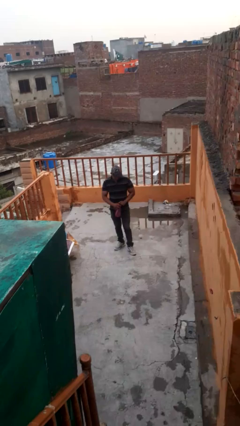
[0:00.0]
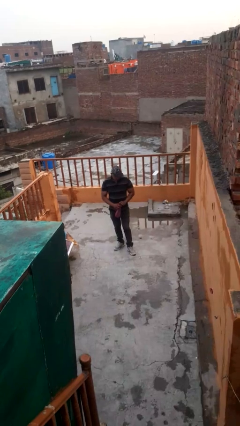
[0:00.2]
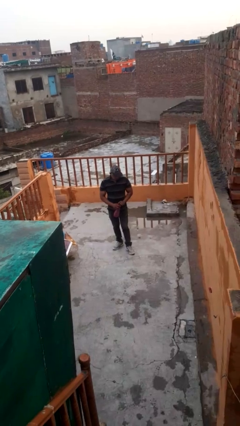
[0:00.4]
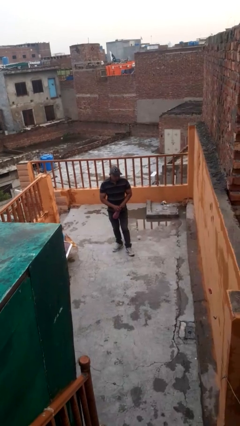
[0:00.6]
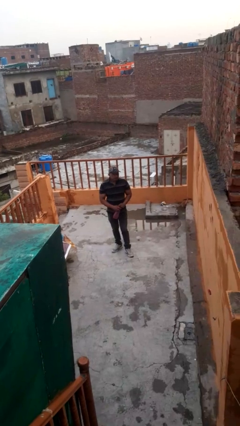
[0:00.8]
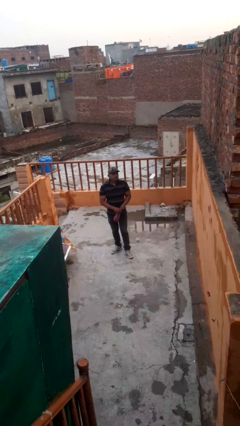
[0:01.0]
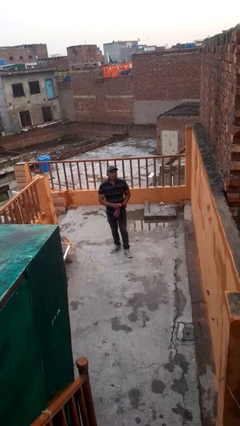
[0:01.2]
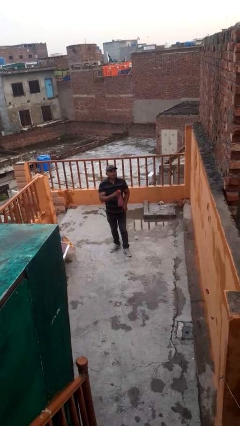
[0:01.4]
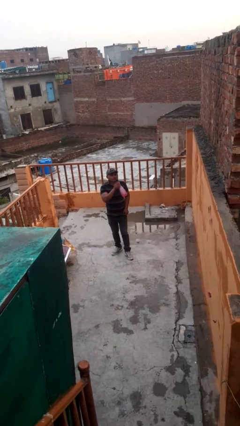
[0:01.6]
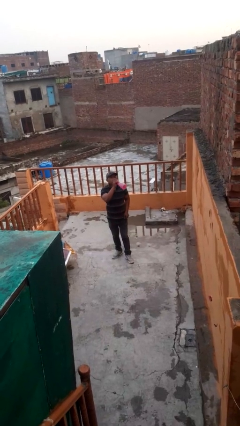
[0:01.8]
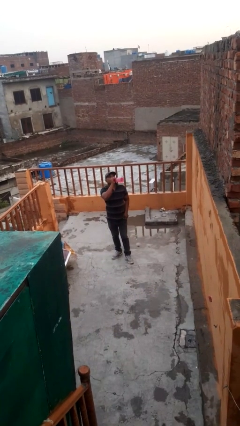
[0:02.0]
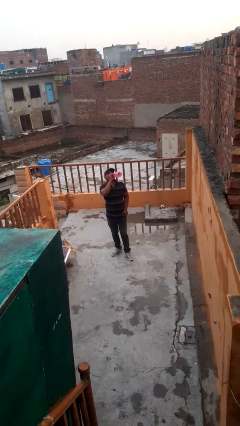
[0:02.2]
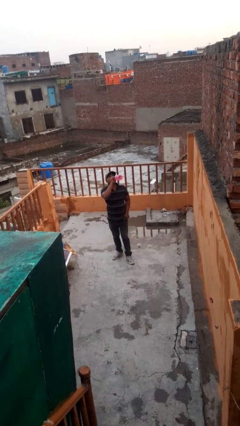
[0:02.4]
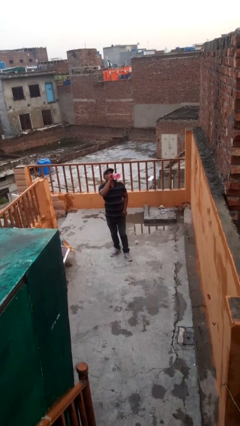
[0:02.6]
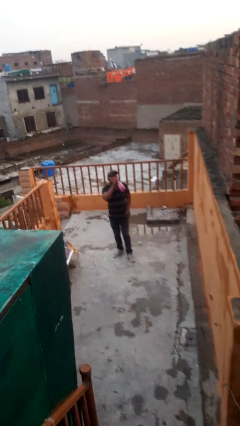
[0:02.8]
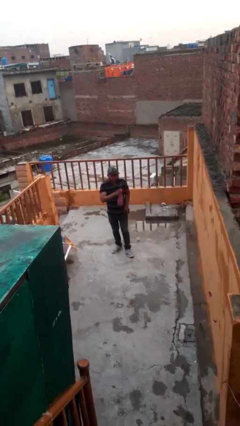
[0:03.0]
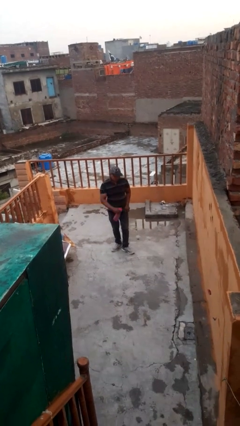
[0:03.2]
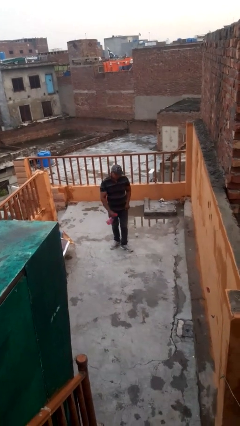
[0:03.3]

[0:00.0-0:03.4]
person drinks from bottle

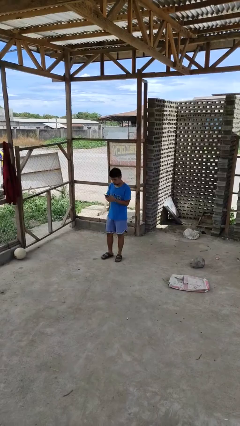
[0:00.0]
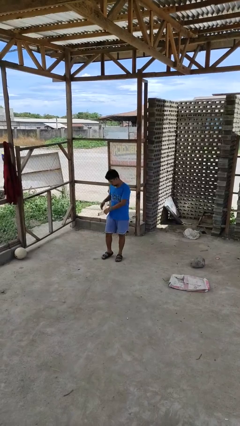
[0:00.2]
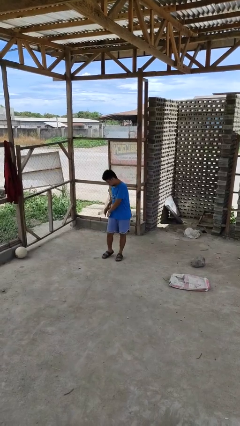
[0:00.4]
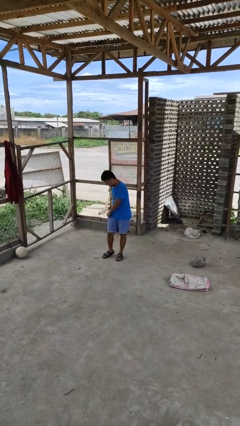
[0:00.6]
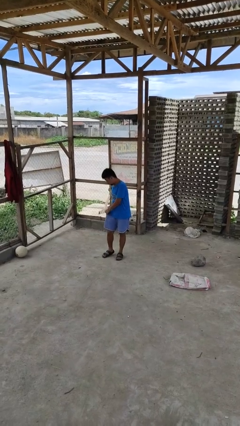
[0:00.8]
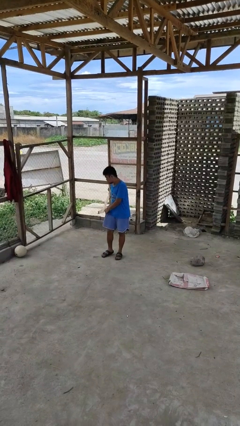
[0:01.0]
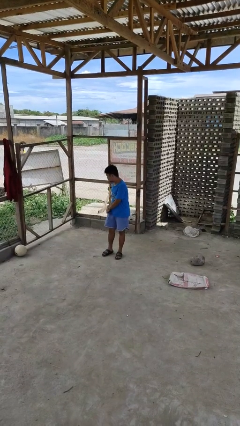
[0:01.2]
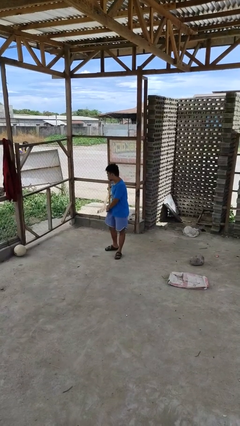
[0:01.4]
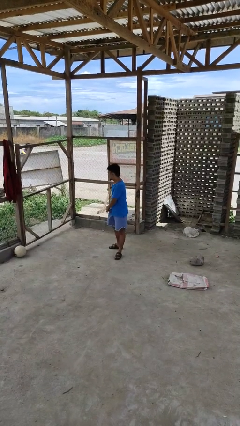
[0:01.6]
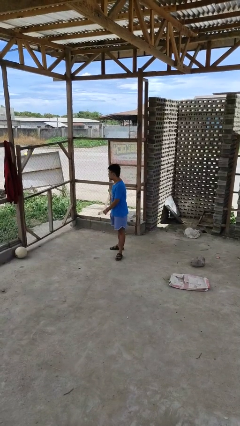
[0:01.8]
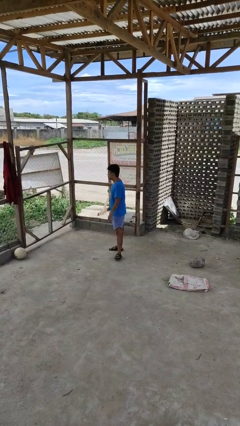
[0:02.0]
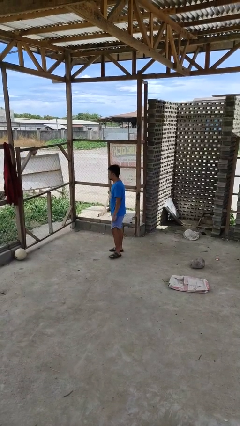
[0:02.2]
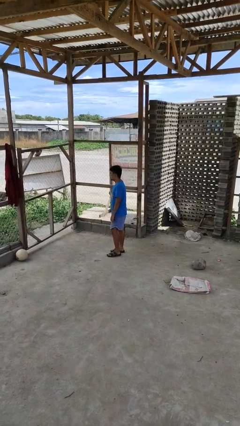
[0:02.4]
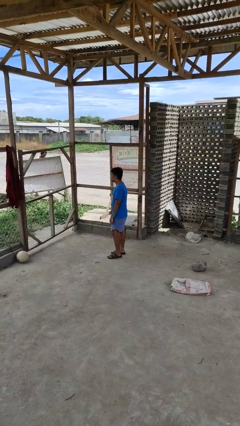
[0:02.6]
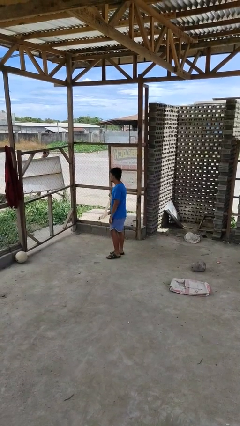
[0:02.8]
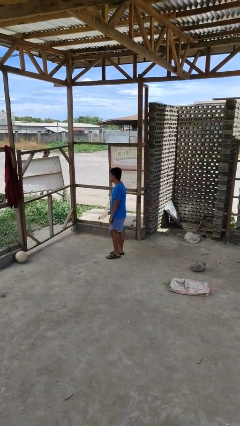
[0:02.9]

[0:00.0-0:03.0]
person puts phone into pocket

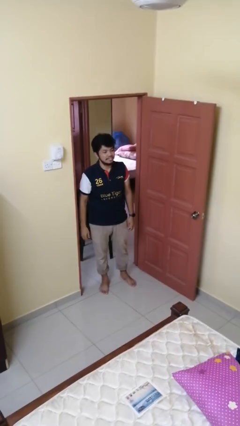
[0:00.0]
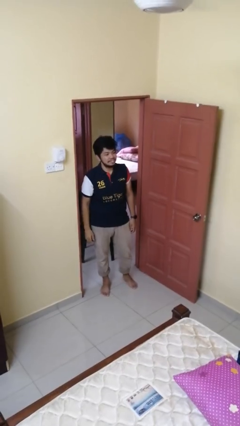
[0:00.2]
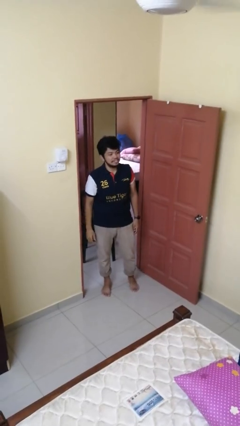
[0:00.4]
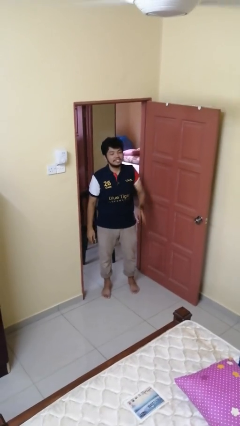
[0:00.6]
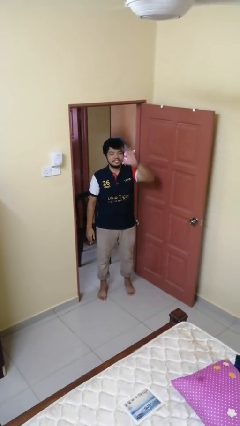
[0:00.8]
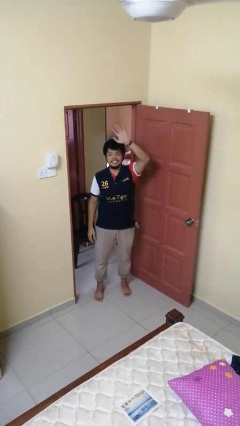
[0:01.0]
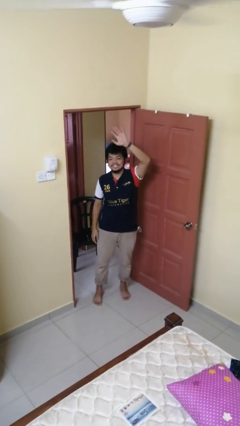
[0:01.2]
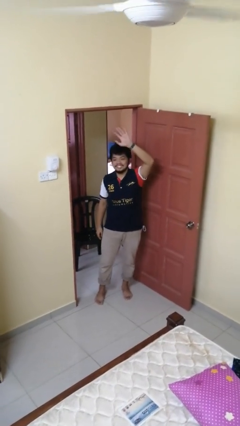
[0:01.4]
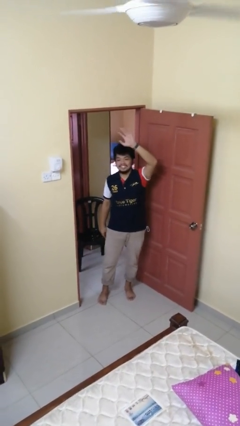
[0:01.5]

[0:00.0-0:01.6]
person gestures raise hand

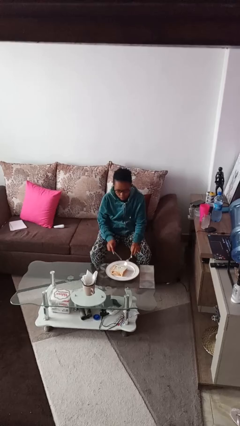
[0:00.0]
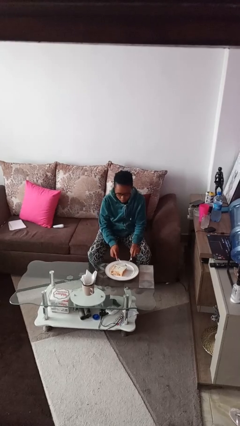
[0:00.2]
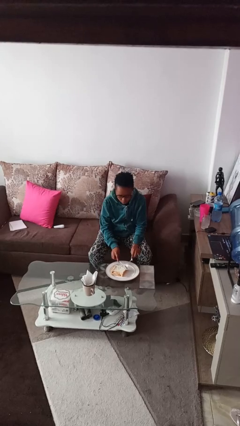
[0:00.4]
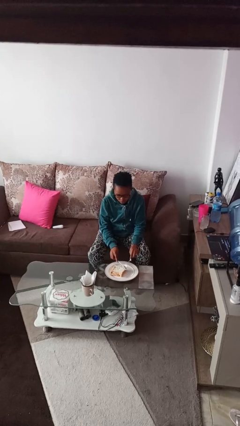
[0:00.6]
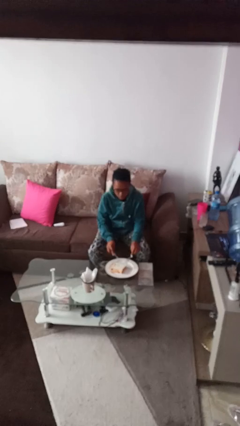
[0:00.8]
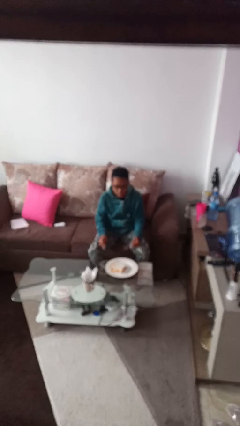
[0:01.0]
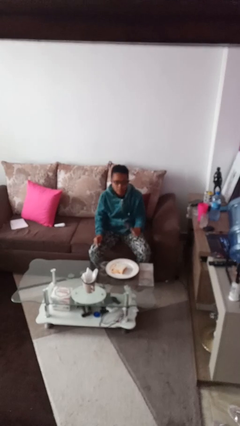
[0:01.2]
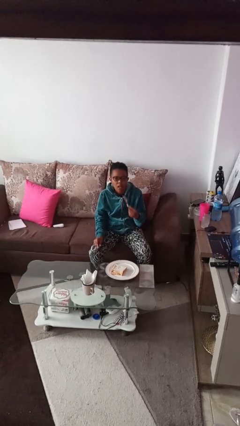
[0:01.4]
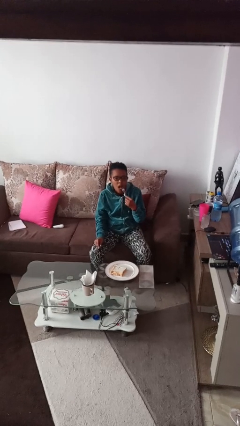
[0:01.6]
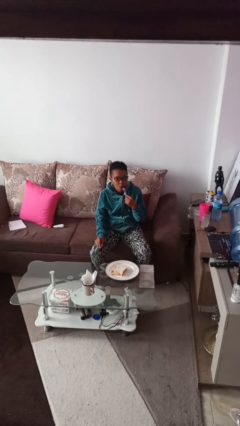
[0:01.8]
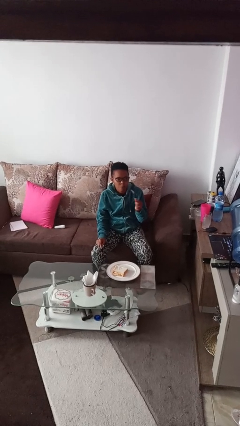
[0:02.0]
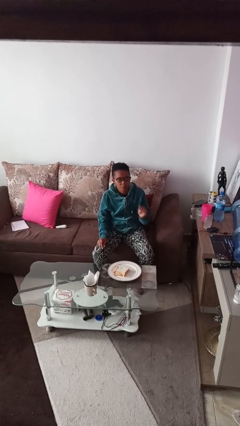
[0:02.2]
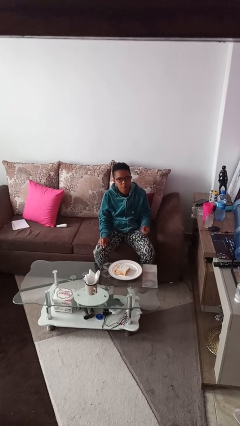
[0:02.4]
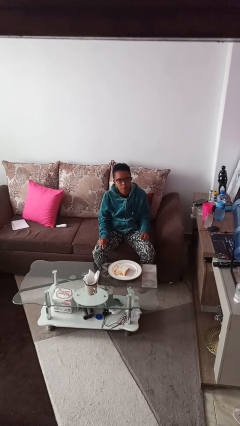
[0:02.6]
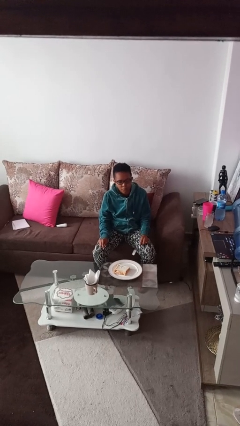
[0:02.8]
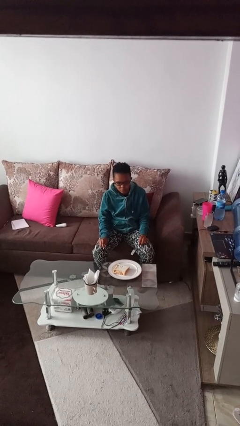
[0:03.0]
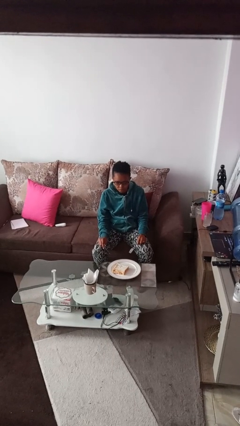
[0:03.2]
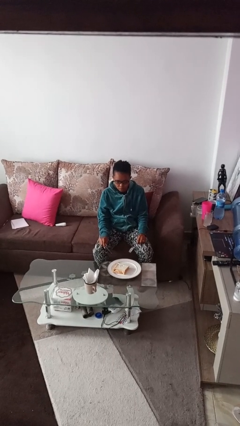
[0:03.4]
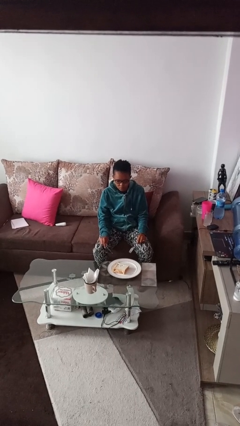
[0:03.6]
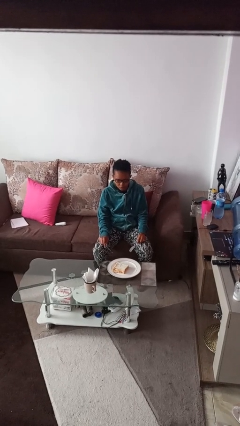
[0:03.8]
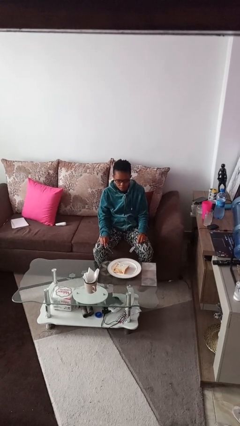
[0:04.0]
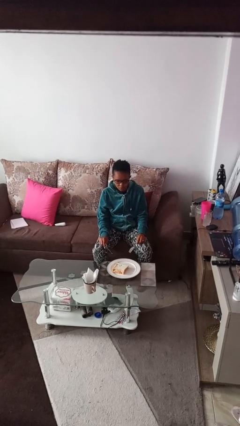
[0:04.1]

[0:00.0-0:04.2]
person eats with utensil

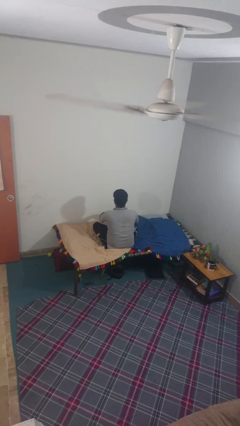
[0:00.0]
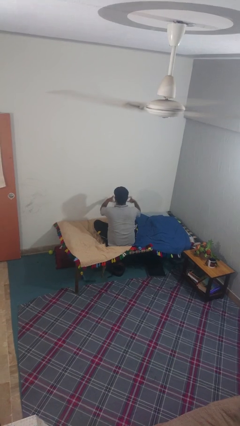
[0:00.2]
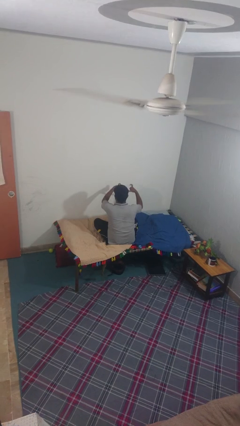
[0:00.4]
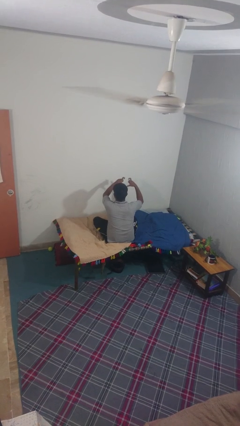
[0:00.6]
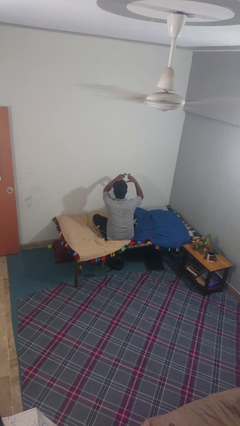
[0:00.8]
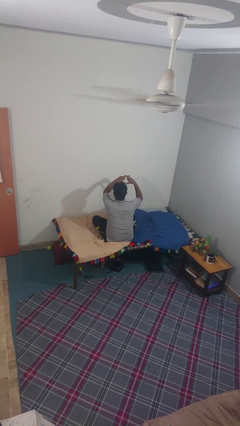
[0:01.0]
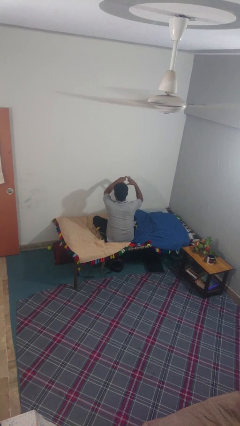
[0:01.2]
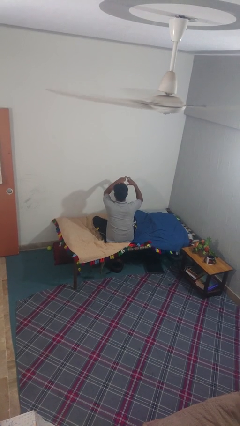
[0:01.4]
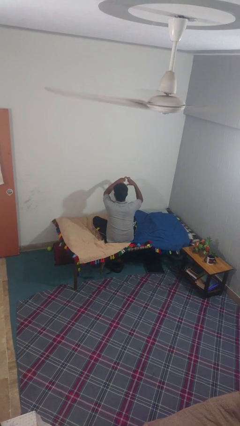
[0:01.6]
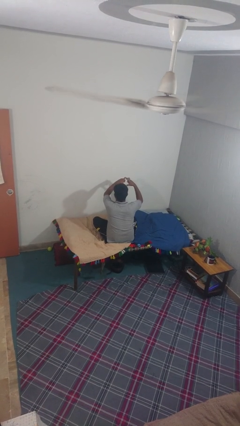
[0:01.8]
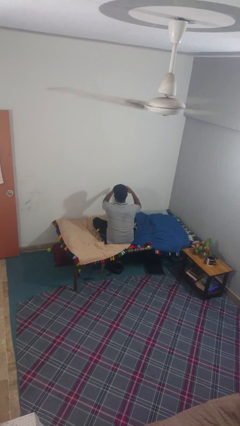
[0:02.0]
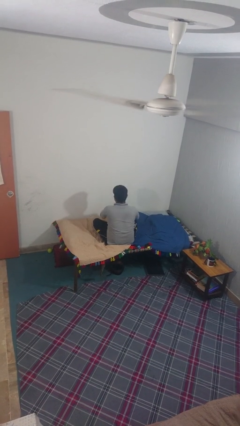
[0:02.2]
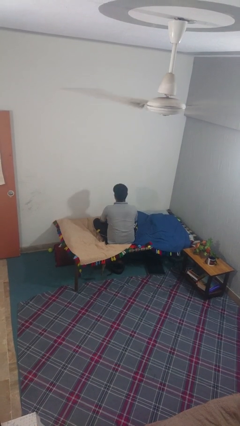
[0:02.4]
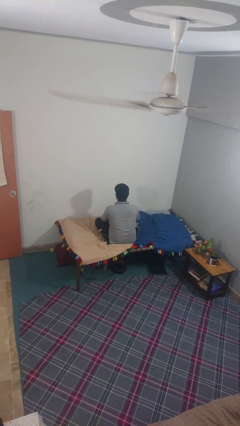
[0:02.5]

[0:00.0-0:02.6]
person gestures heart

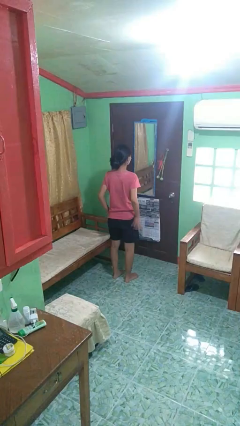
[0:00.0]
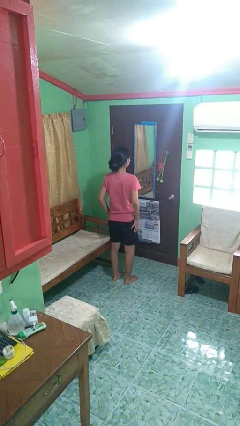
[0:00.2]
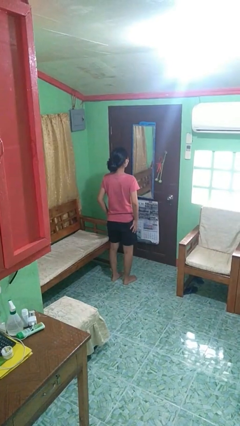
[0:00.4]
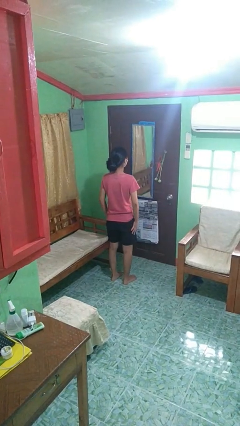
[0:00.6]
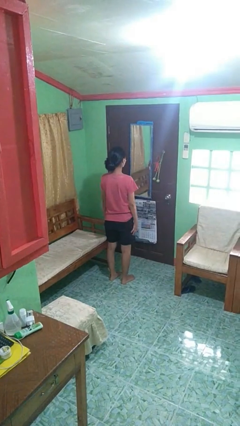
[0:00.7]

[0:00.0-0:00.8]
person slaps hands on thighs

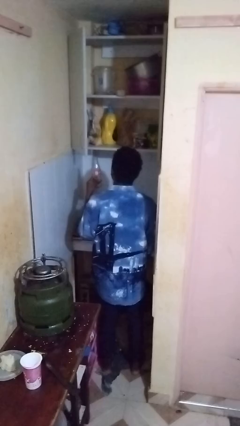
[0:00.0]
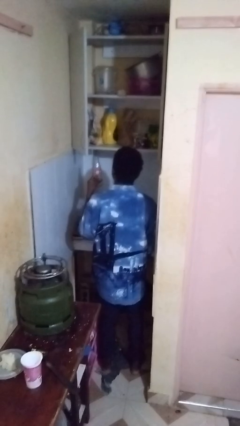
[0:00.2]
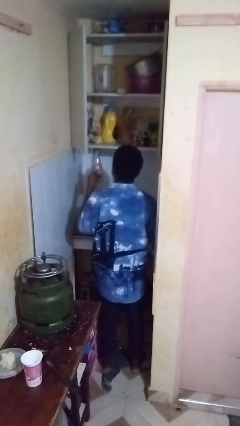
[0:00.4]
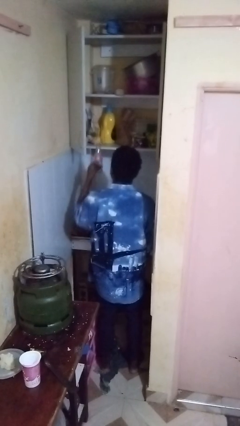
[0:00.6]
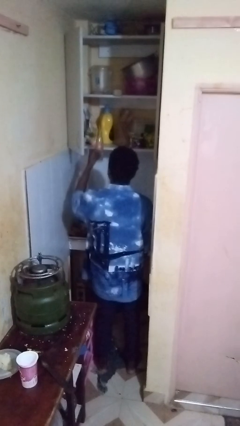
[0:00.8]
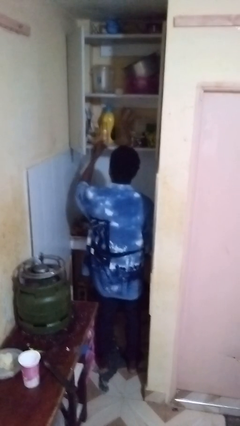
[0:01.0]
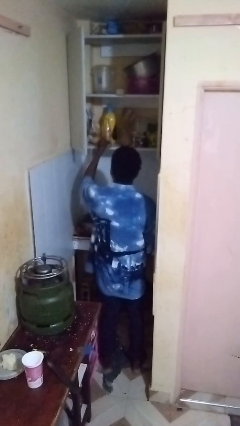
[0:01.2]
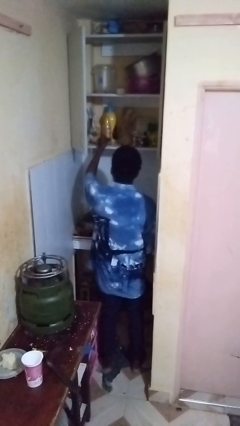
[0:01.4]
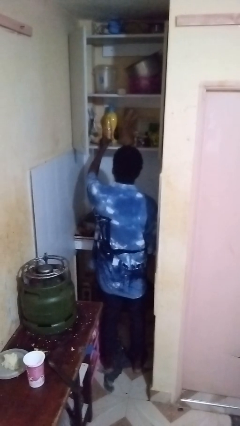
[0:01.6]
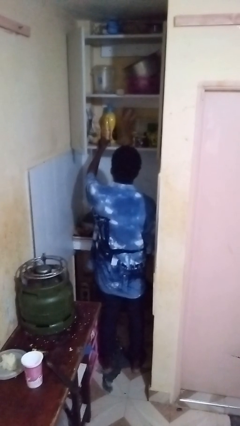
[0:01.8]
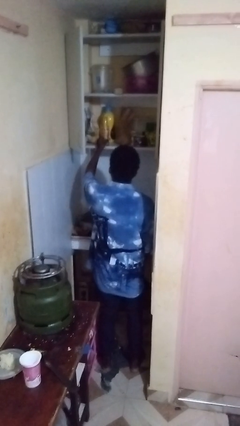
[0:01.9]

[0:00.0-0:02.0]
person puts down object into cabinet
